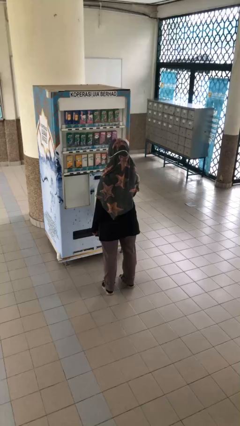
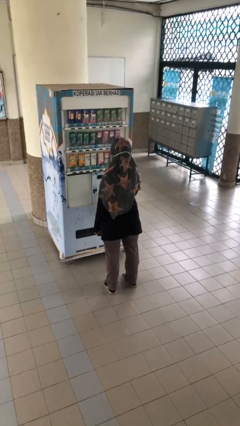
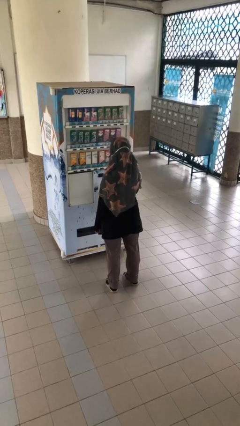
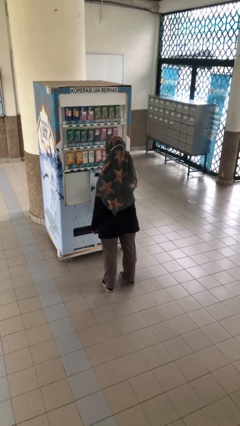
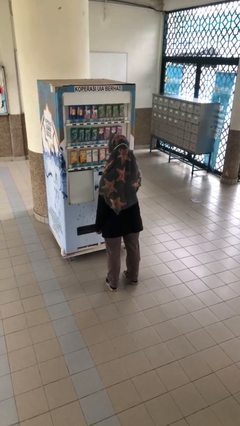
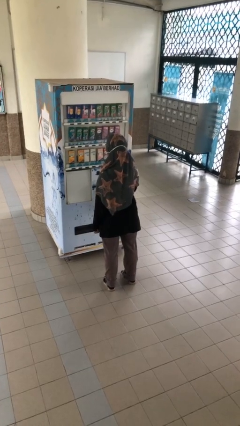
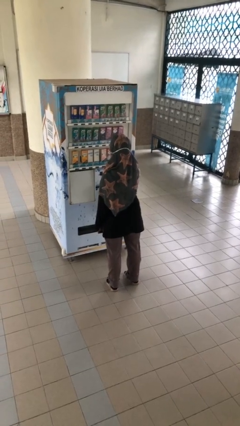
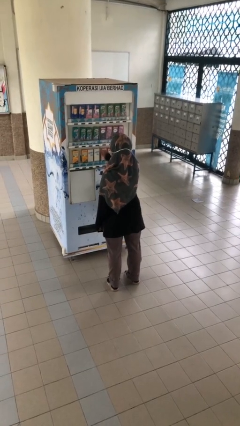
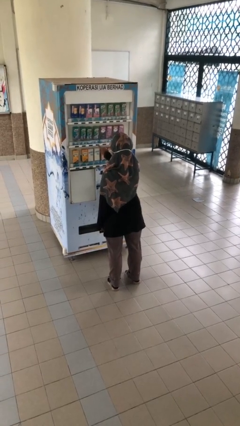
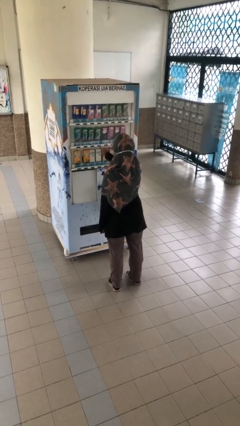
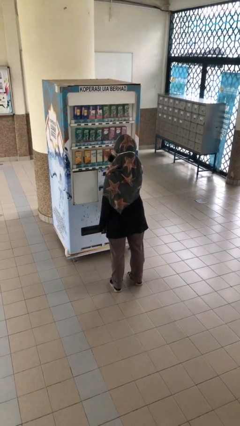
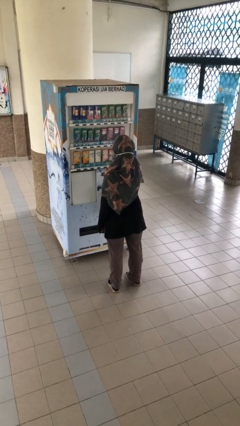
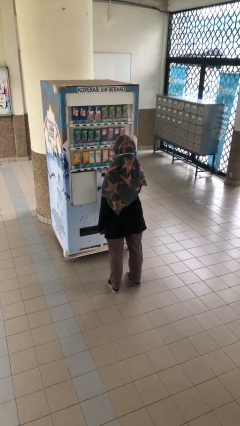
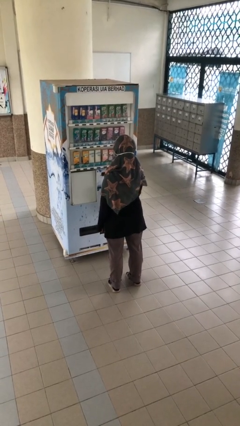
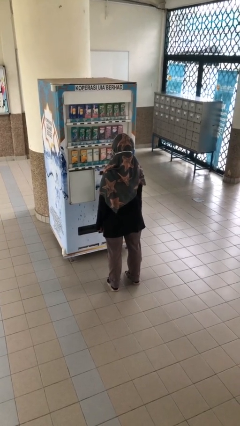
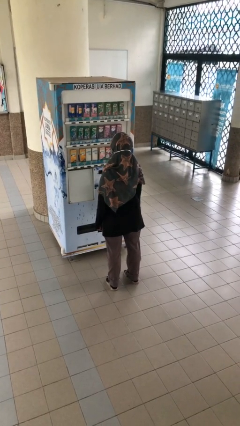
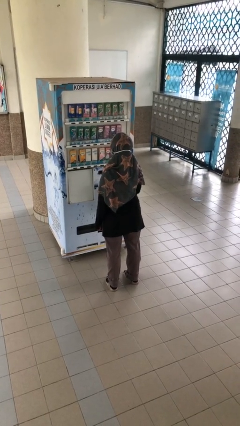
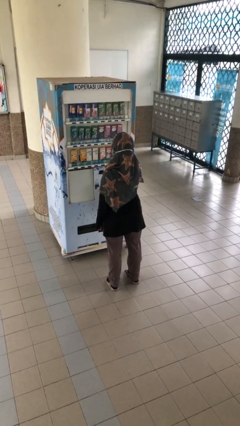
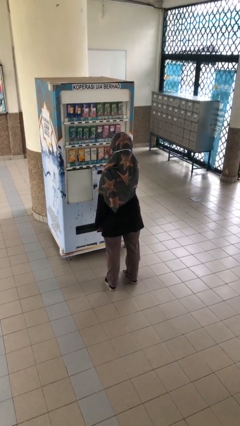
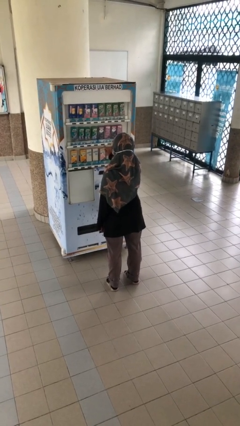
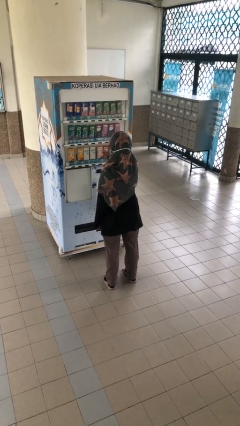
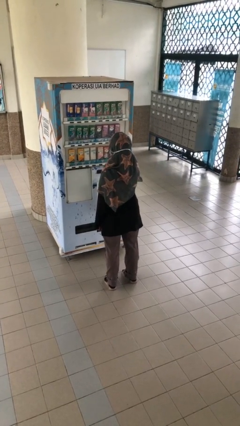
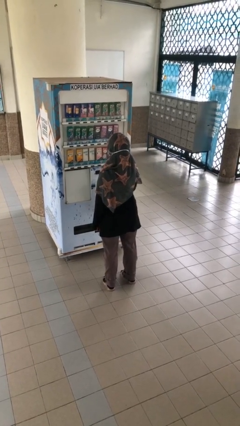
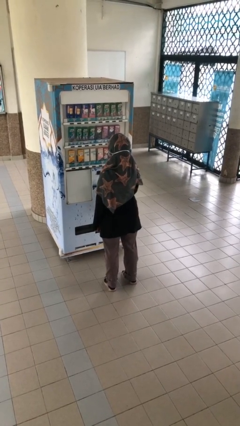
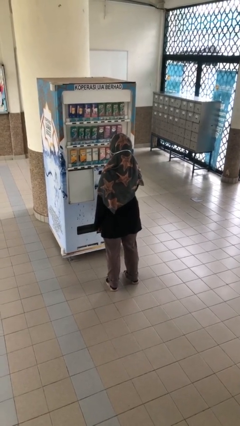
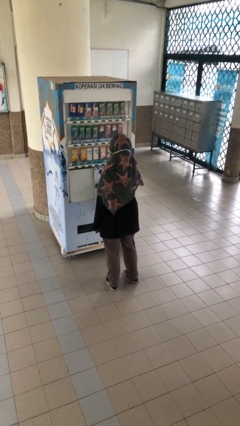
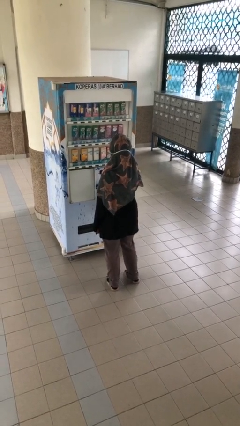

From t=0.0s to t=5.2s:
person purchases from machine

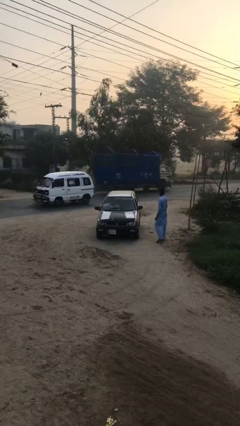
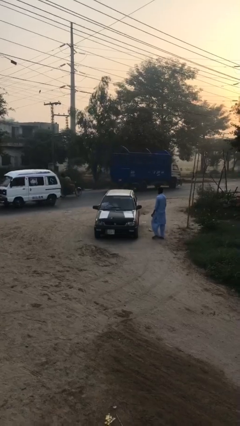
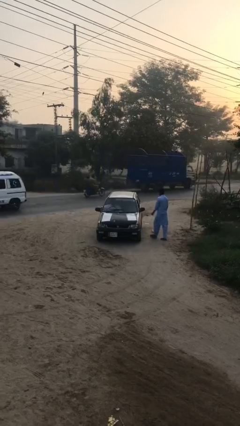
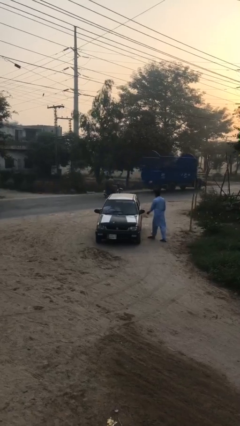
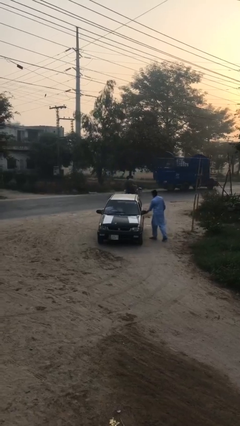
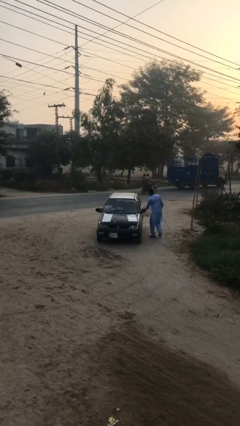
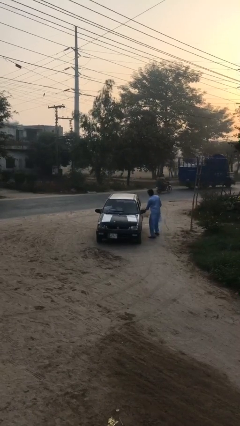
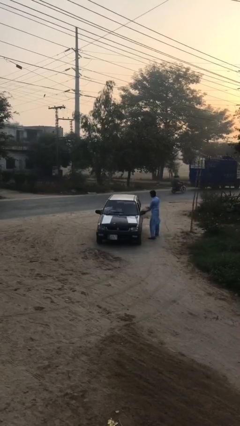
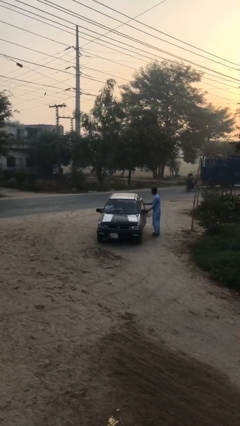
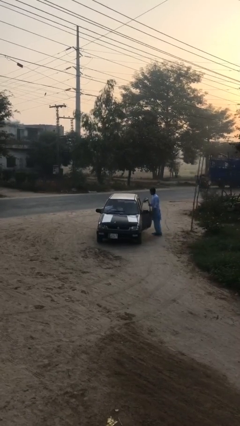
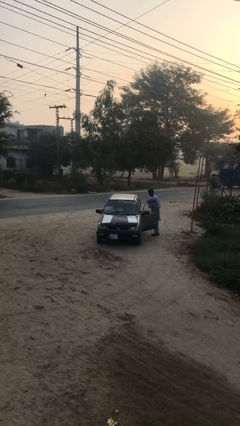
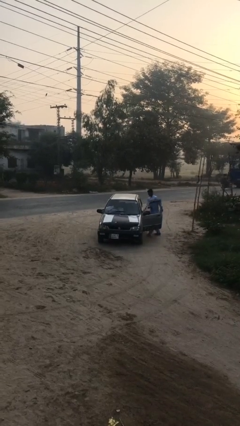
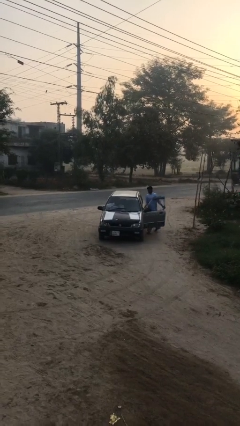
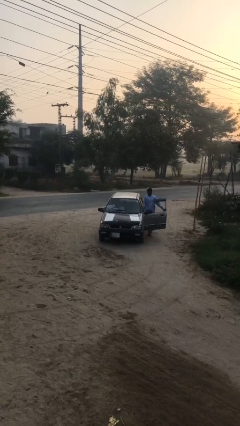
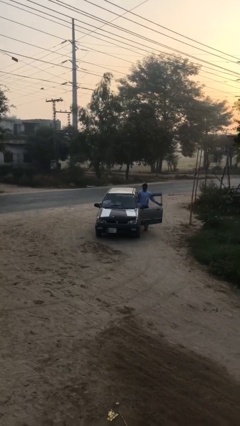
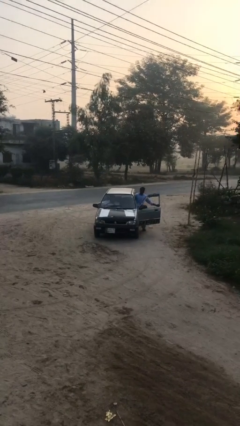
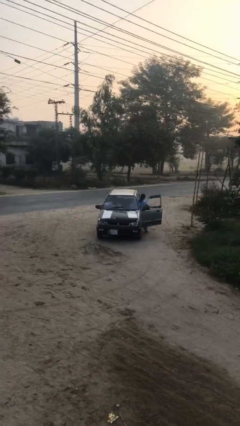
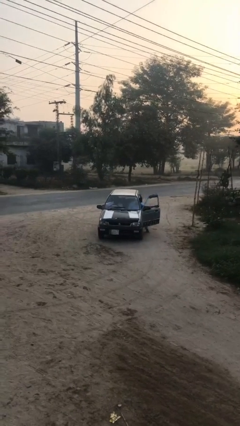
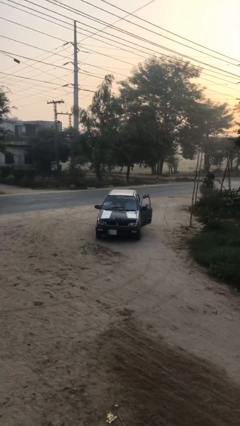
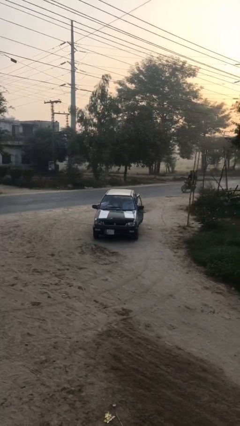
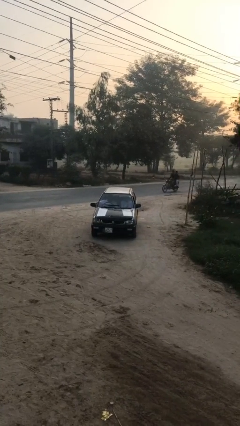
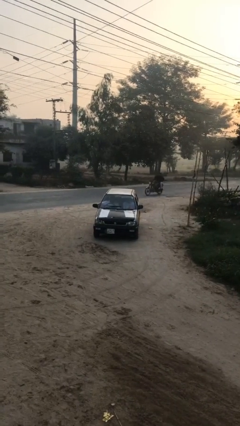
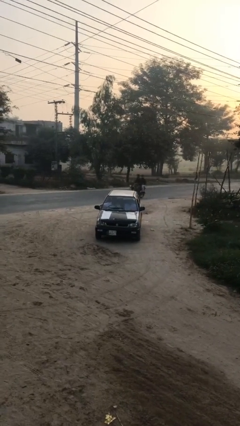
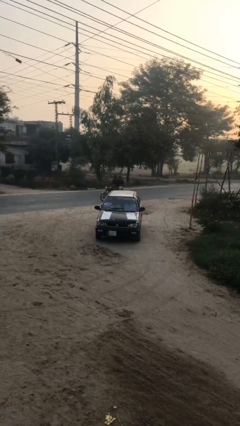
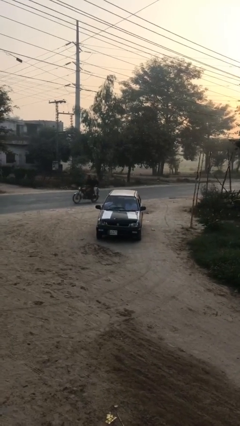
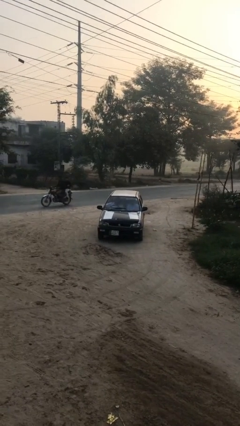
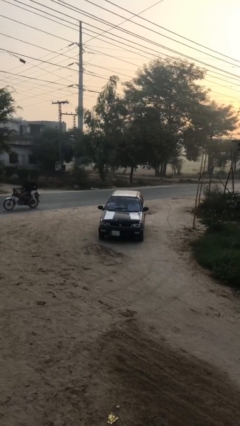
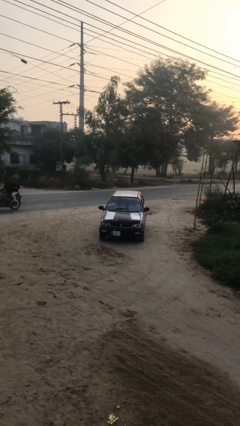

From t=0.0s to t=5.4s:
car picks up person

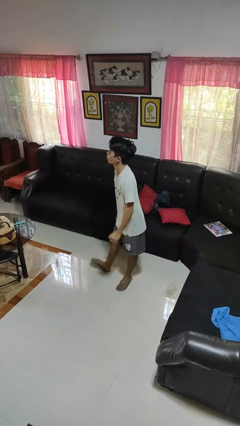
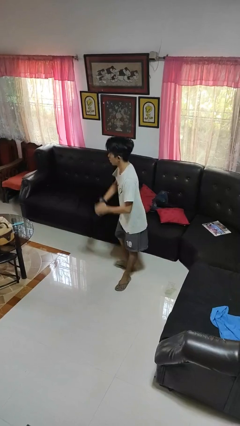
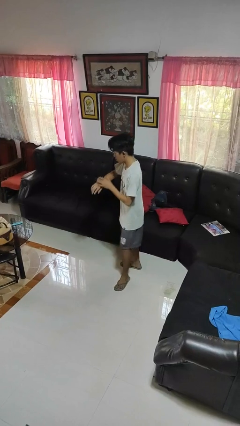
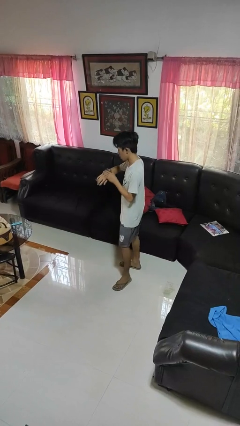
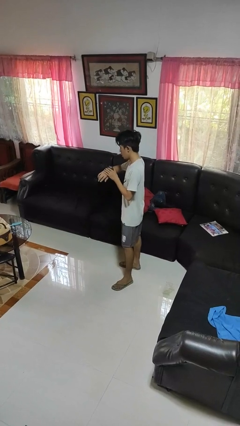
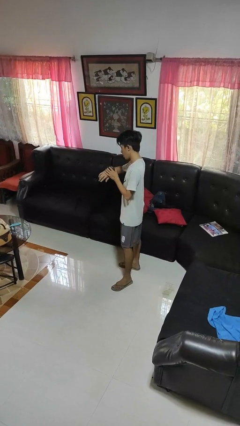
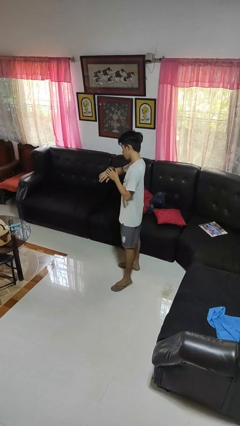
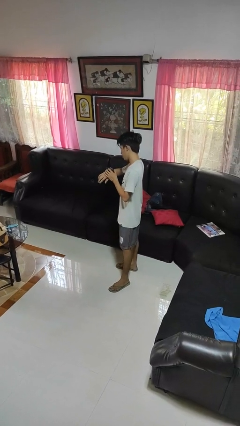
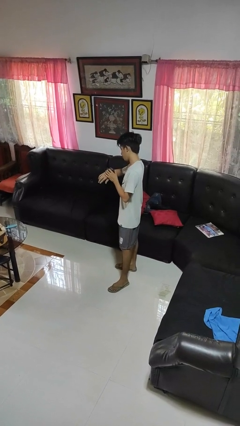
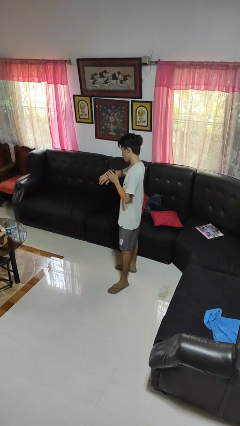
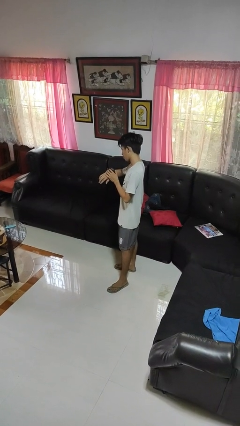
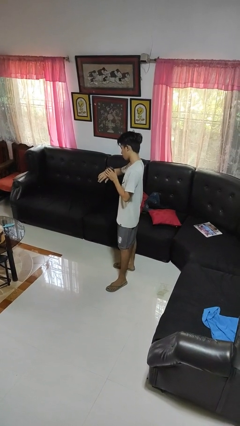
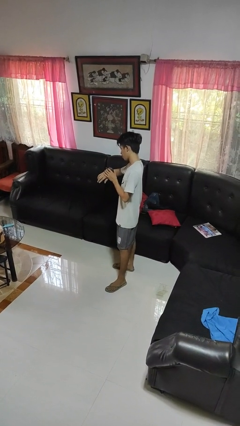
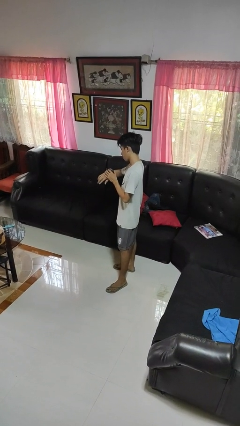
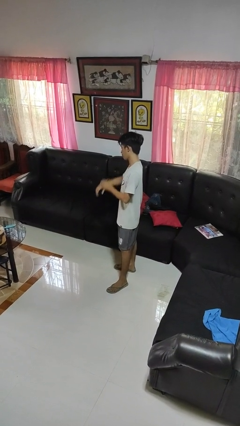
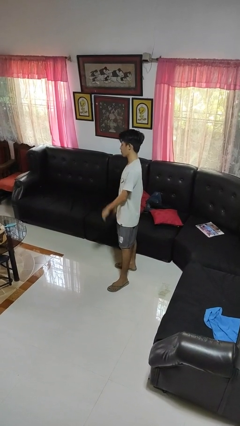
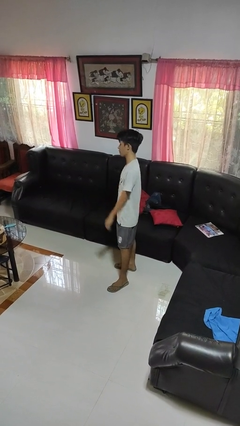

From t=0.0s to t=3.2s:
person looks at wristwatch

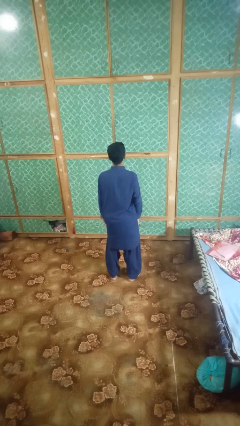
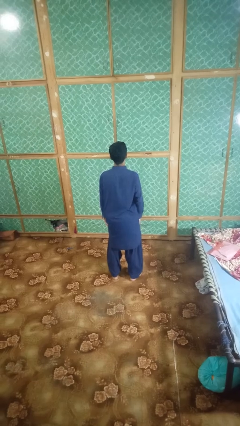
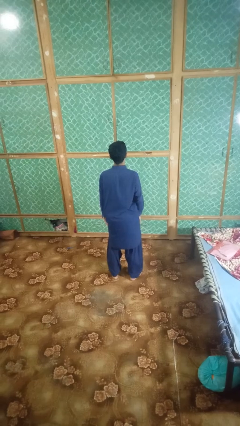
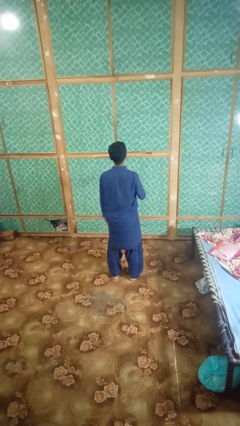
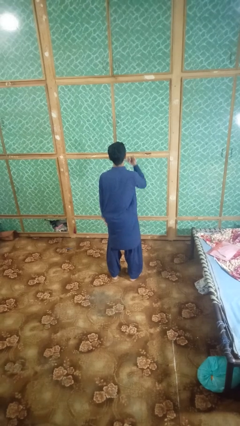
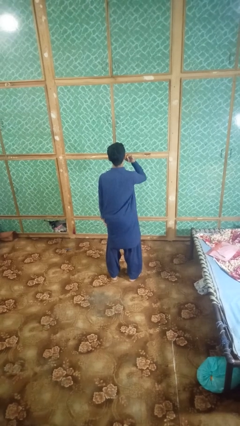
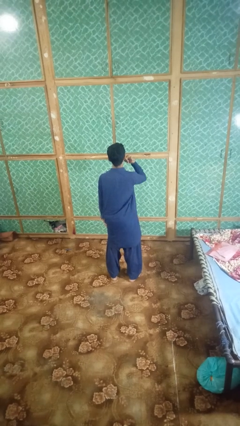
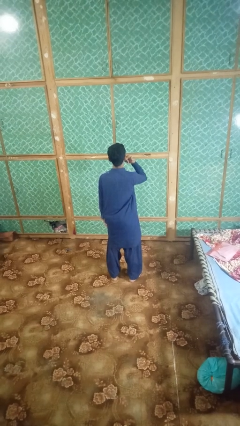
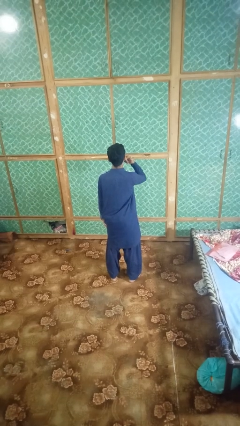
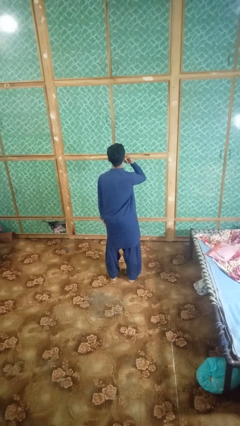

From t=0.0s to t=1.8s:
person gestures call me

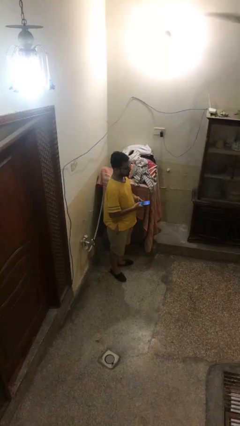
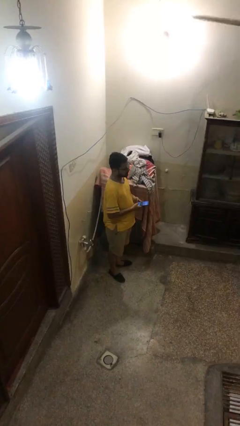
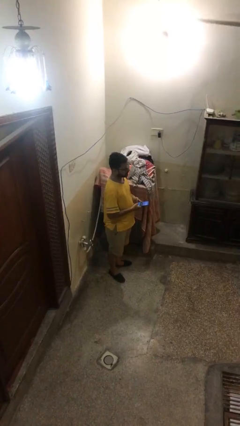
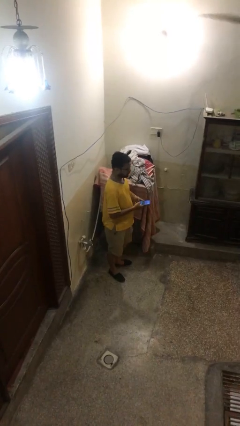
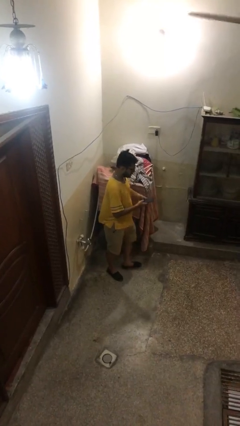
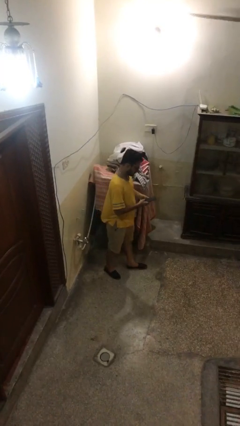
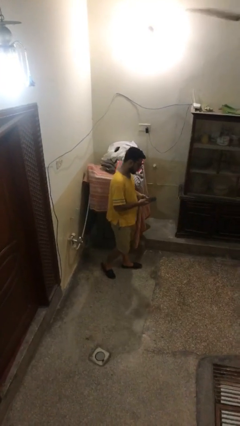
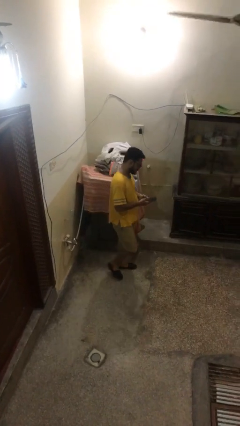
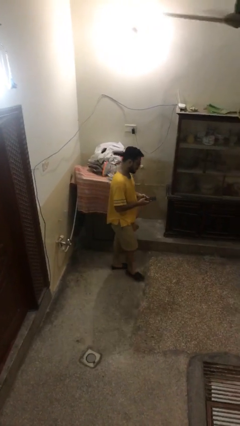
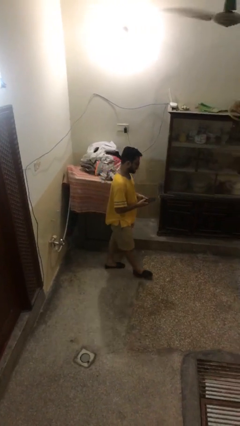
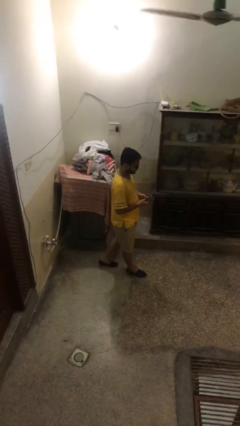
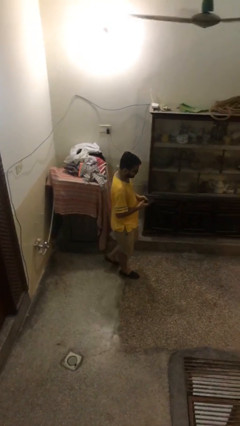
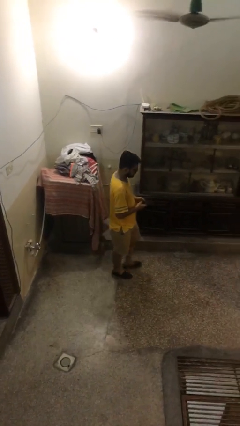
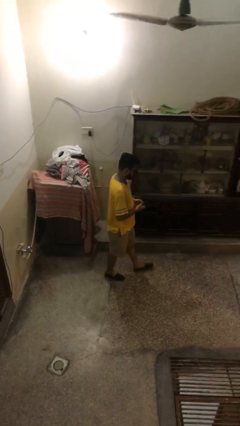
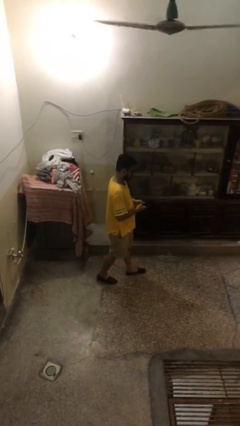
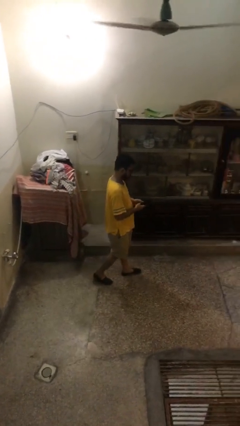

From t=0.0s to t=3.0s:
person texts on phone
